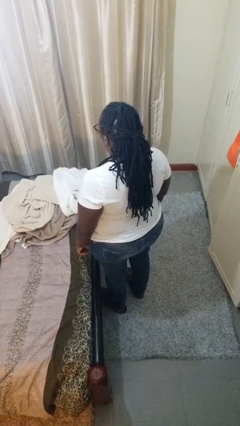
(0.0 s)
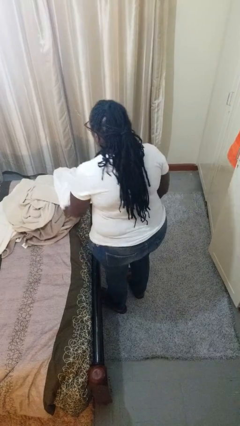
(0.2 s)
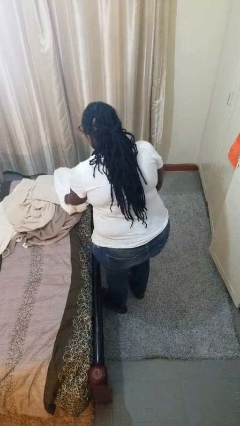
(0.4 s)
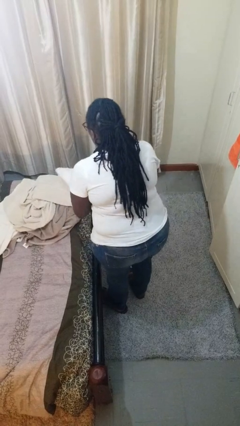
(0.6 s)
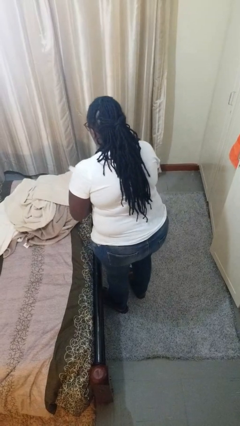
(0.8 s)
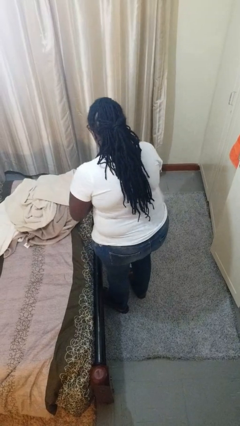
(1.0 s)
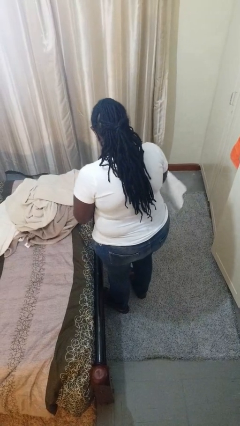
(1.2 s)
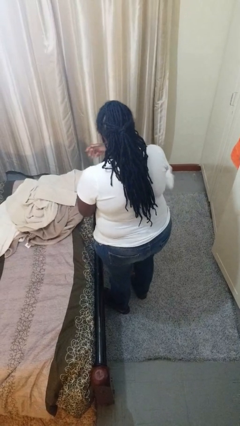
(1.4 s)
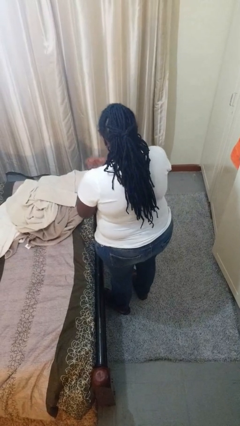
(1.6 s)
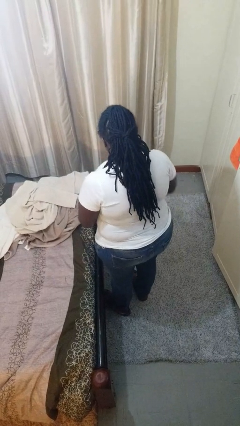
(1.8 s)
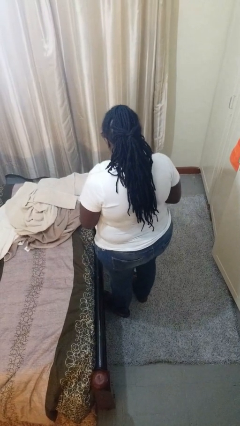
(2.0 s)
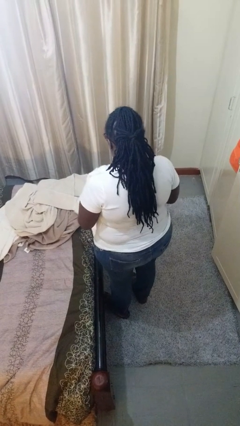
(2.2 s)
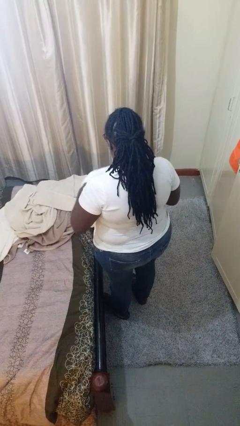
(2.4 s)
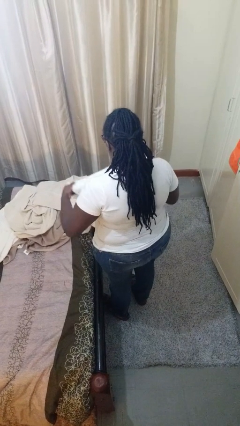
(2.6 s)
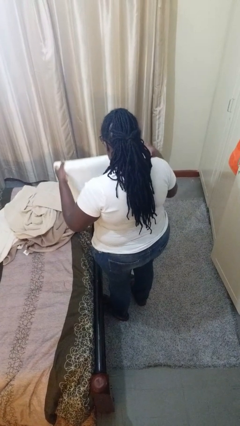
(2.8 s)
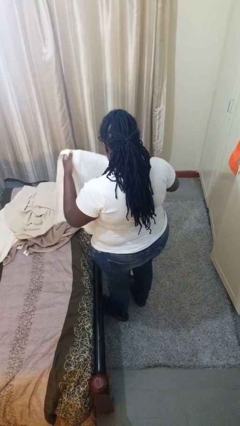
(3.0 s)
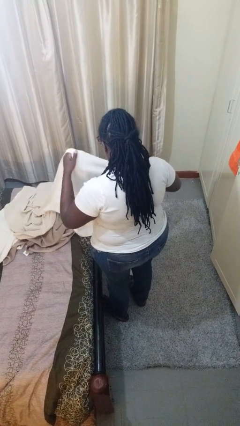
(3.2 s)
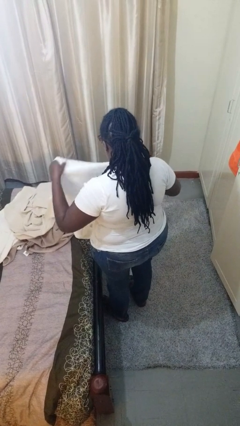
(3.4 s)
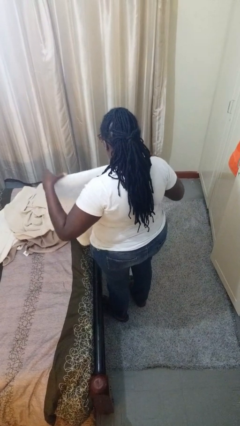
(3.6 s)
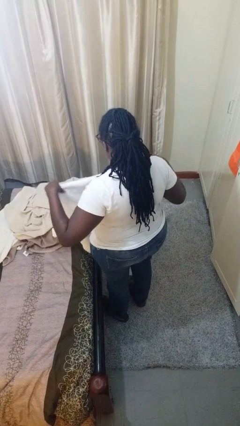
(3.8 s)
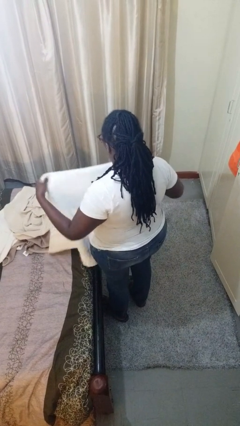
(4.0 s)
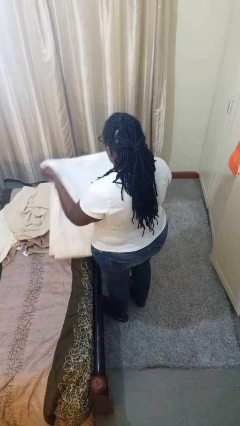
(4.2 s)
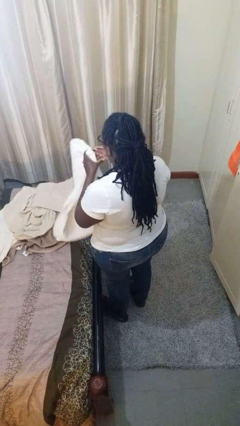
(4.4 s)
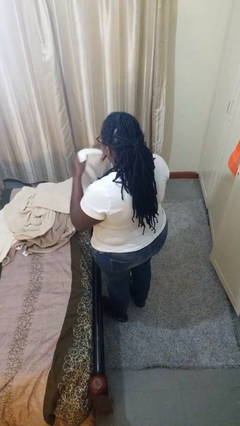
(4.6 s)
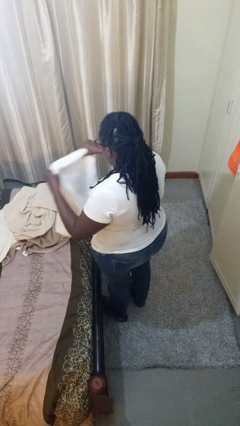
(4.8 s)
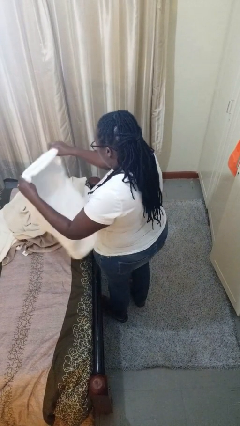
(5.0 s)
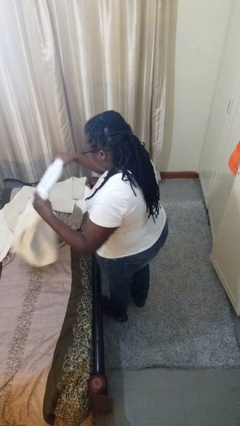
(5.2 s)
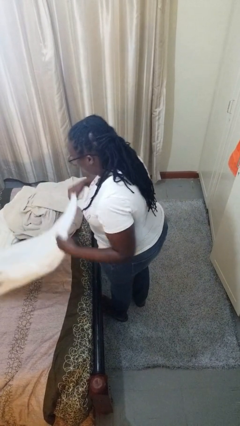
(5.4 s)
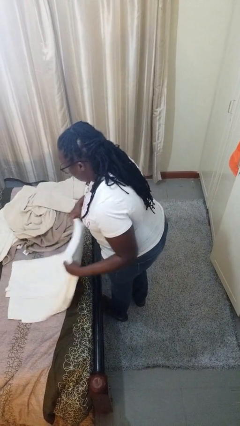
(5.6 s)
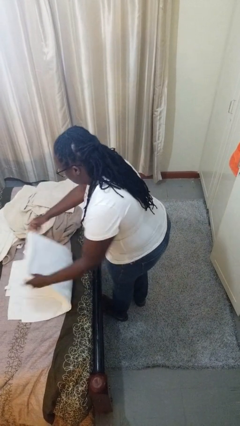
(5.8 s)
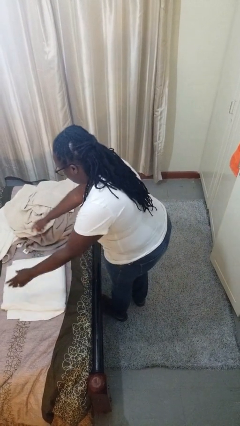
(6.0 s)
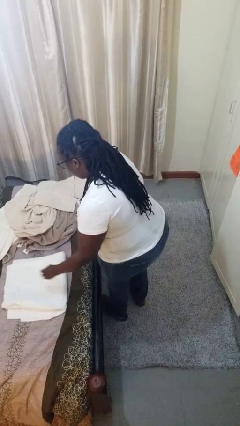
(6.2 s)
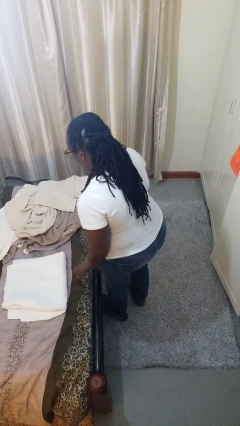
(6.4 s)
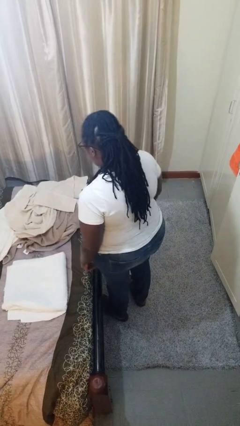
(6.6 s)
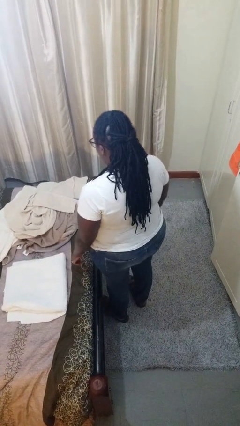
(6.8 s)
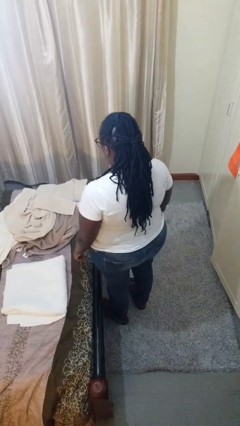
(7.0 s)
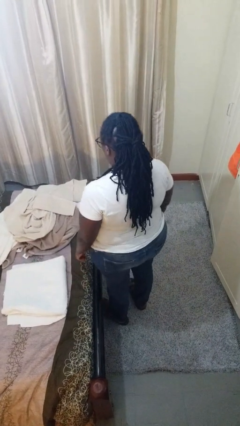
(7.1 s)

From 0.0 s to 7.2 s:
person folds towel

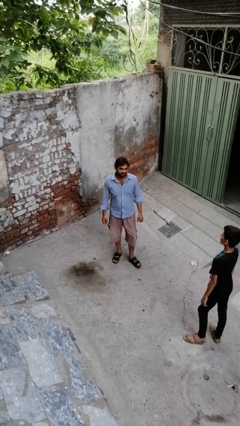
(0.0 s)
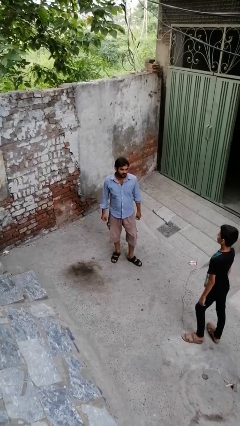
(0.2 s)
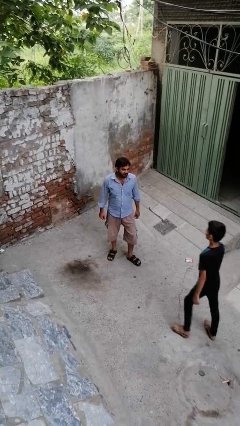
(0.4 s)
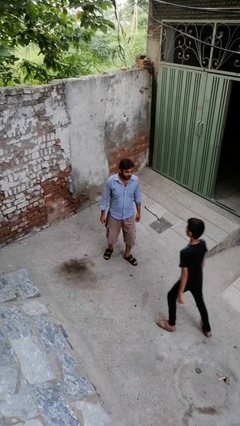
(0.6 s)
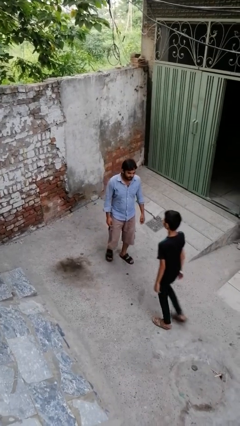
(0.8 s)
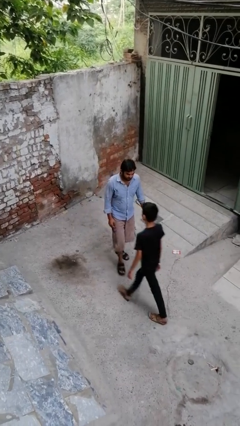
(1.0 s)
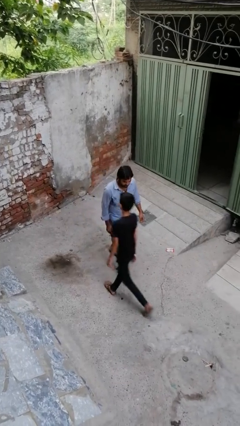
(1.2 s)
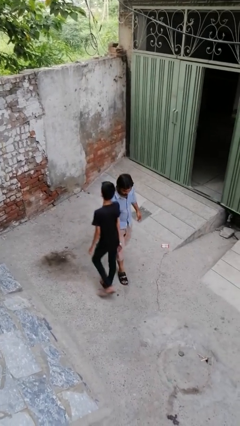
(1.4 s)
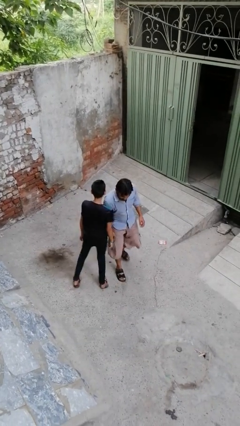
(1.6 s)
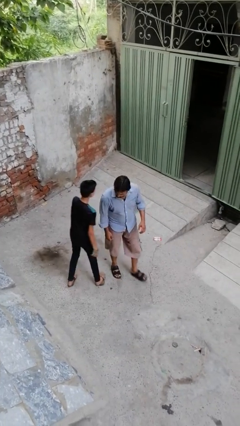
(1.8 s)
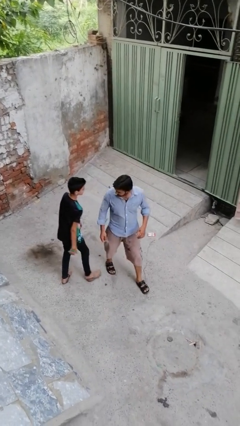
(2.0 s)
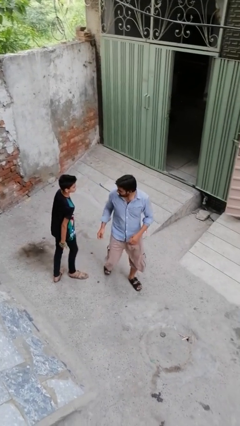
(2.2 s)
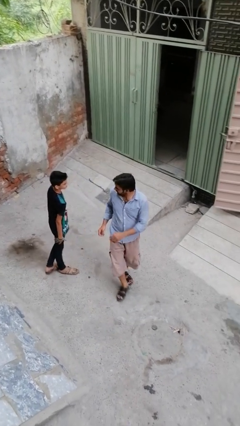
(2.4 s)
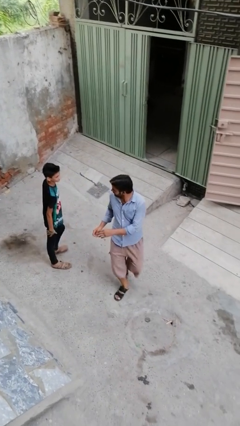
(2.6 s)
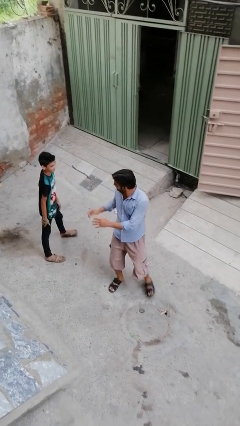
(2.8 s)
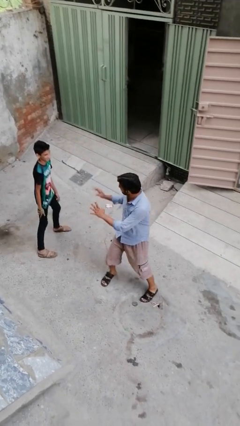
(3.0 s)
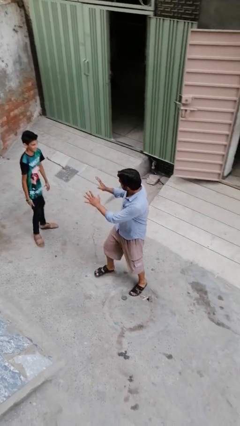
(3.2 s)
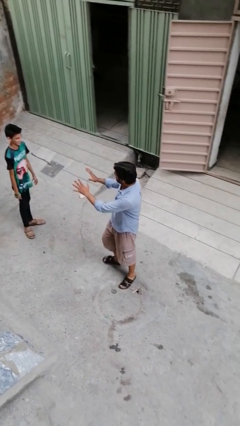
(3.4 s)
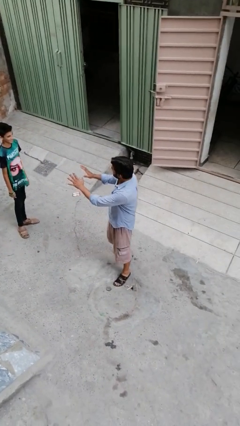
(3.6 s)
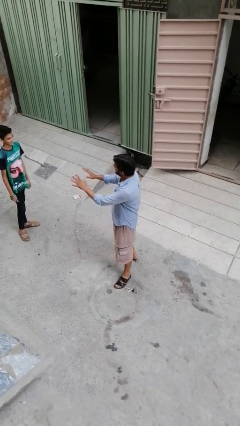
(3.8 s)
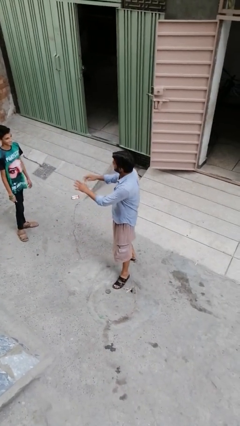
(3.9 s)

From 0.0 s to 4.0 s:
person bumps into person

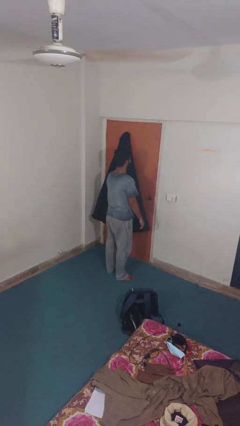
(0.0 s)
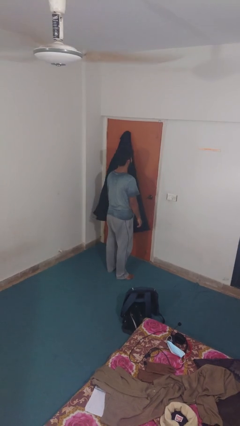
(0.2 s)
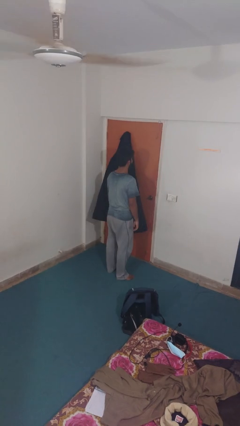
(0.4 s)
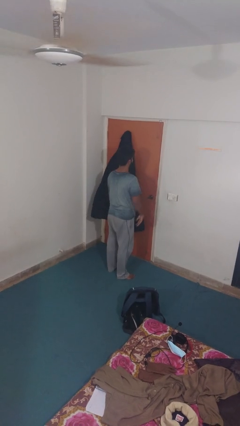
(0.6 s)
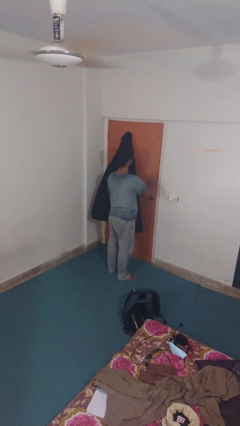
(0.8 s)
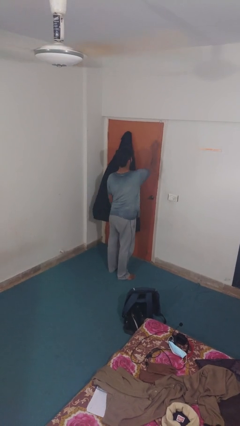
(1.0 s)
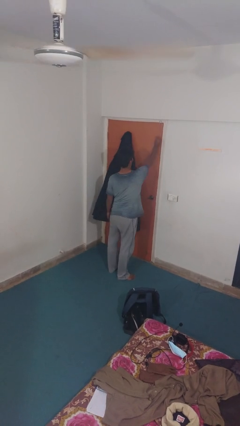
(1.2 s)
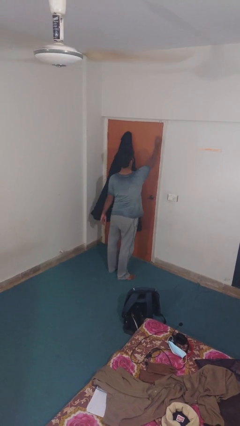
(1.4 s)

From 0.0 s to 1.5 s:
person locks door with keys

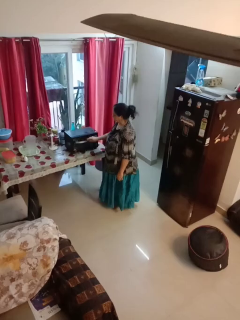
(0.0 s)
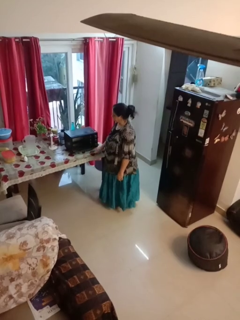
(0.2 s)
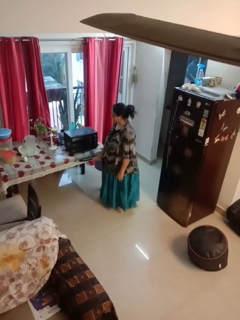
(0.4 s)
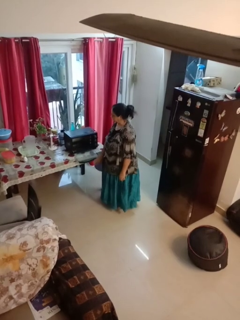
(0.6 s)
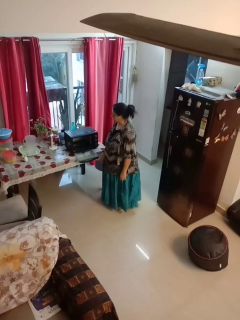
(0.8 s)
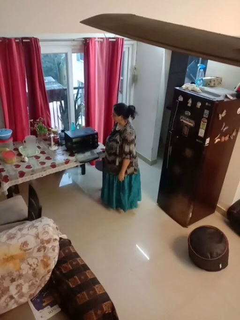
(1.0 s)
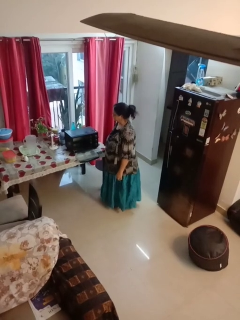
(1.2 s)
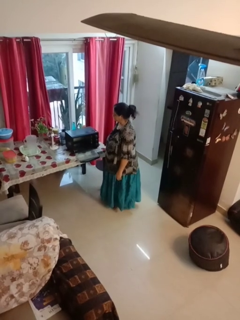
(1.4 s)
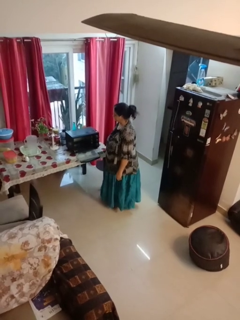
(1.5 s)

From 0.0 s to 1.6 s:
person opens microwave

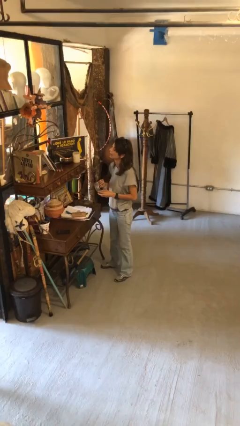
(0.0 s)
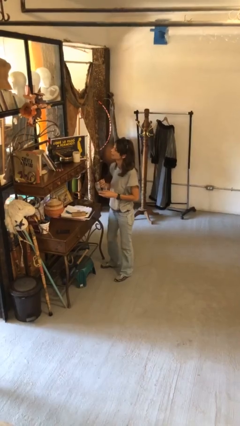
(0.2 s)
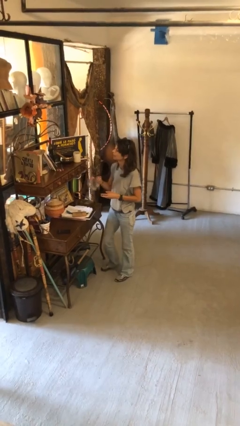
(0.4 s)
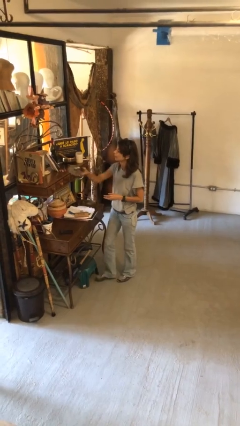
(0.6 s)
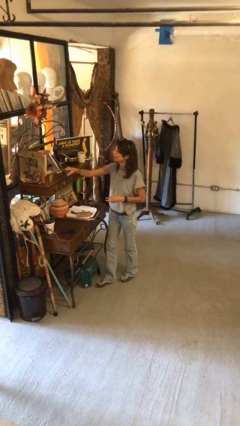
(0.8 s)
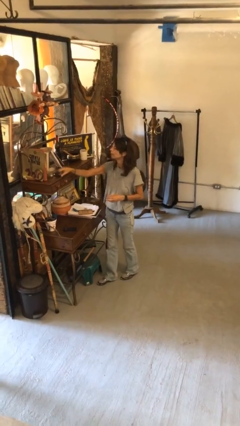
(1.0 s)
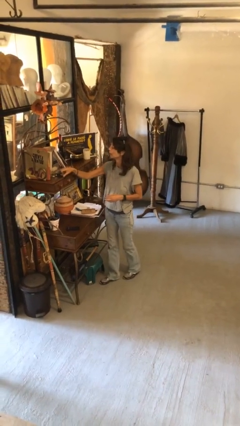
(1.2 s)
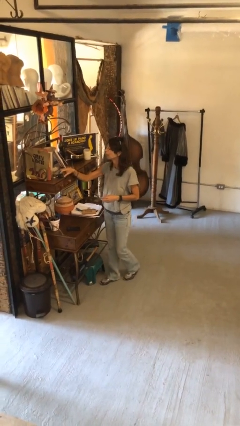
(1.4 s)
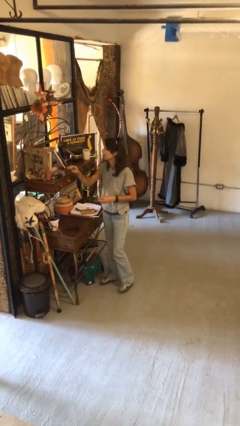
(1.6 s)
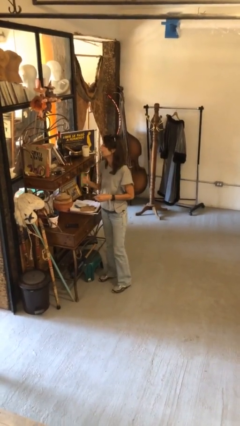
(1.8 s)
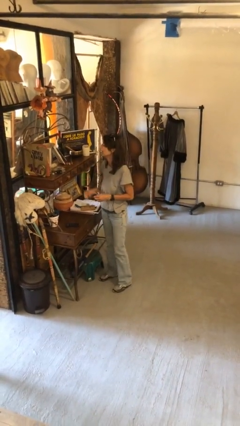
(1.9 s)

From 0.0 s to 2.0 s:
person puts down object on countertop

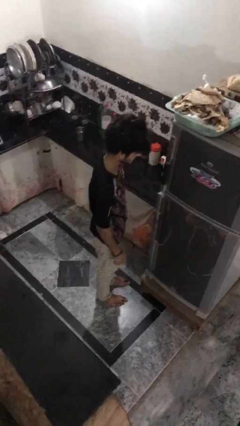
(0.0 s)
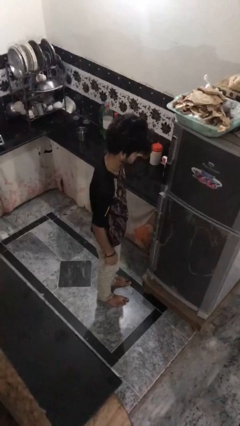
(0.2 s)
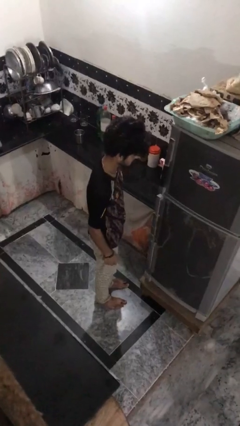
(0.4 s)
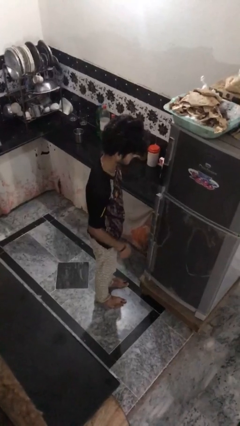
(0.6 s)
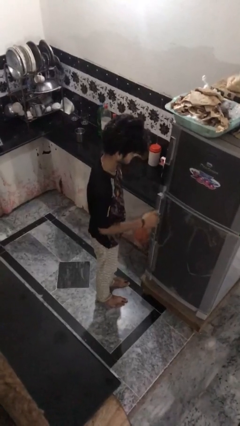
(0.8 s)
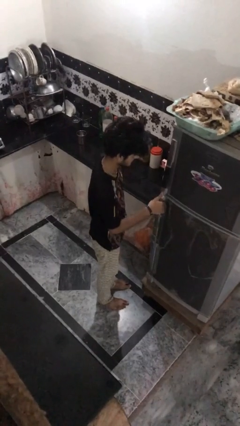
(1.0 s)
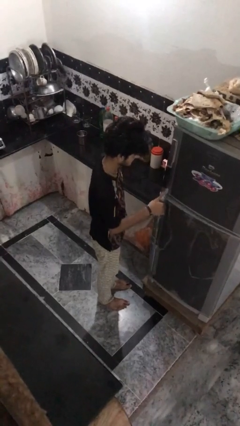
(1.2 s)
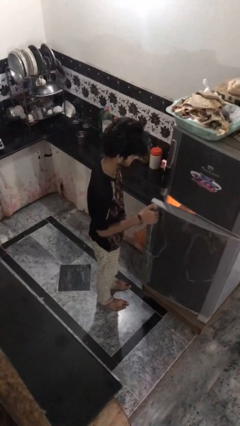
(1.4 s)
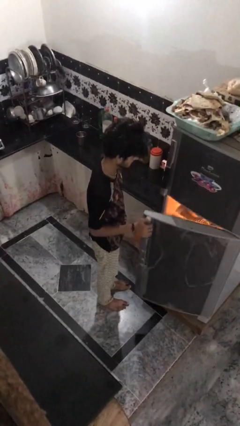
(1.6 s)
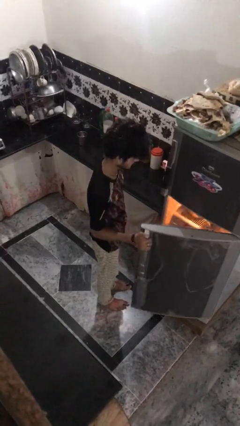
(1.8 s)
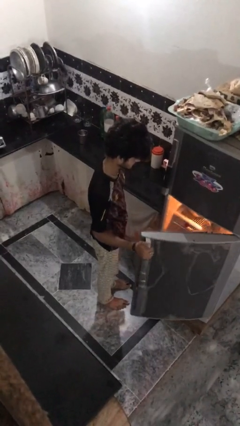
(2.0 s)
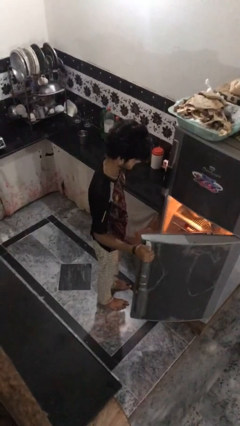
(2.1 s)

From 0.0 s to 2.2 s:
person opens refrigerator
